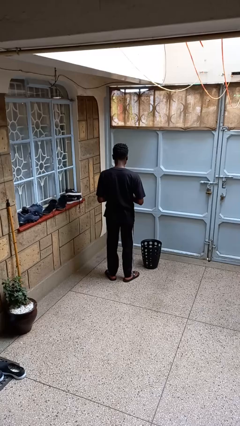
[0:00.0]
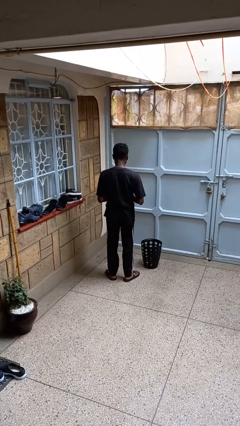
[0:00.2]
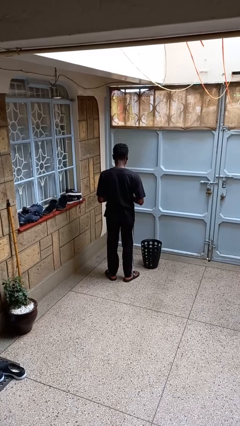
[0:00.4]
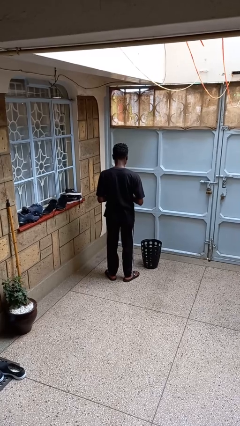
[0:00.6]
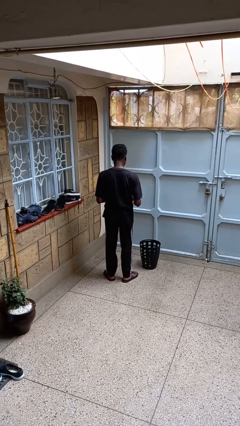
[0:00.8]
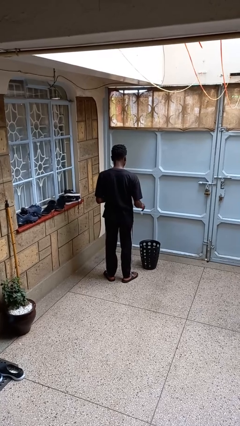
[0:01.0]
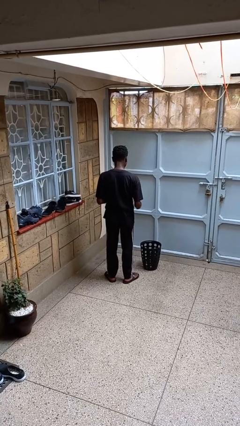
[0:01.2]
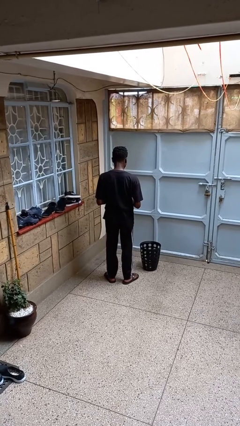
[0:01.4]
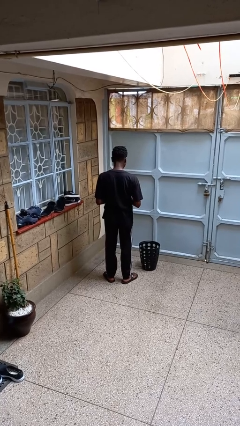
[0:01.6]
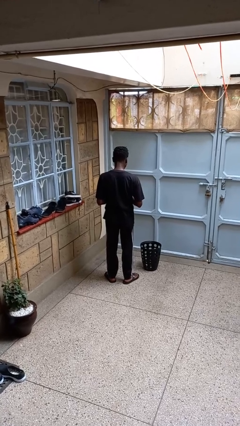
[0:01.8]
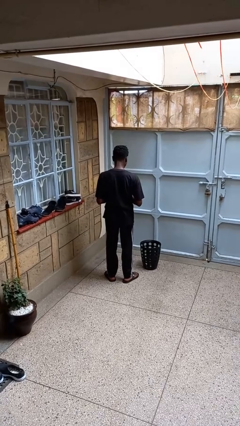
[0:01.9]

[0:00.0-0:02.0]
person discards trash

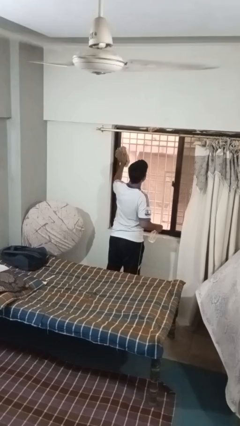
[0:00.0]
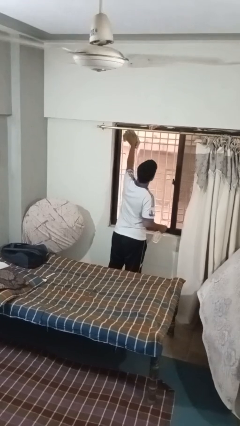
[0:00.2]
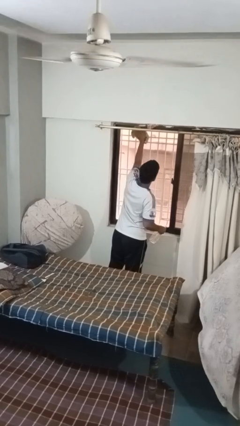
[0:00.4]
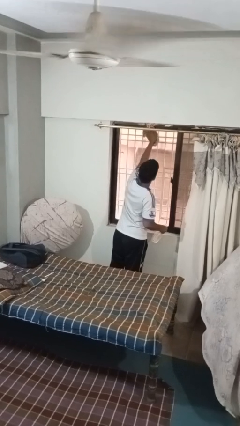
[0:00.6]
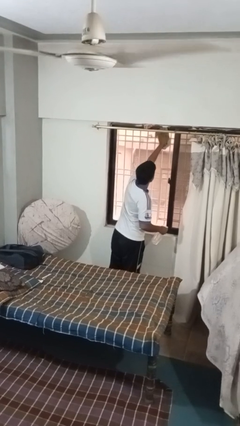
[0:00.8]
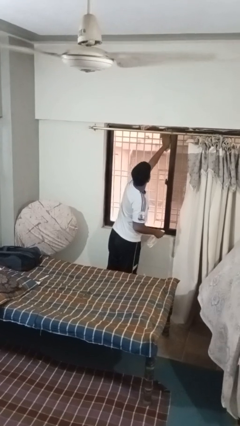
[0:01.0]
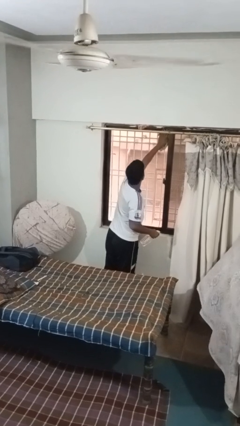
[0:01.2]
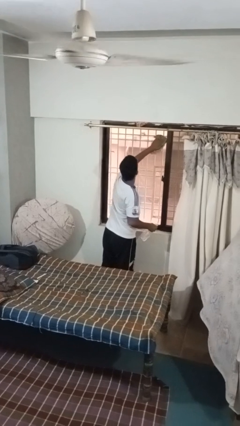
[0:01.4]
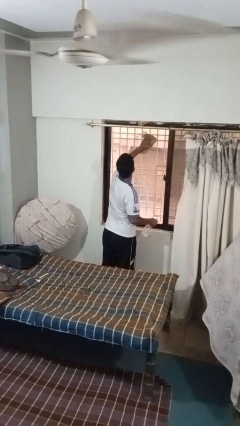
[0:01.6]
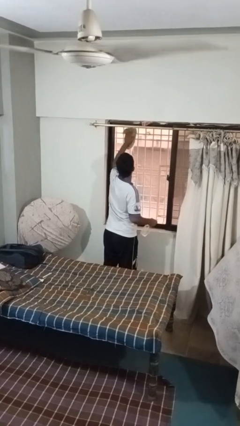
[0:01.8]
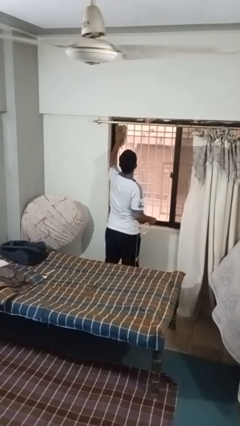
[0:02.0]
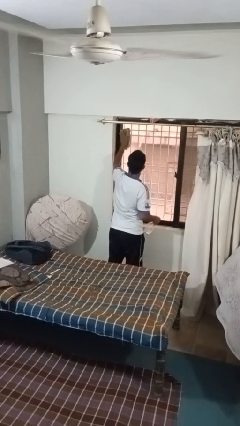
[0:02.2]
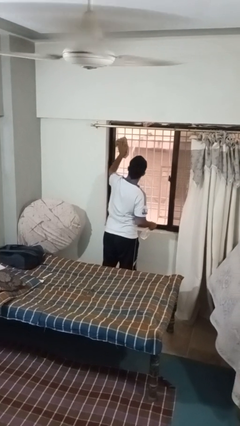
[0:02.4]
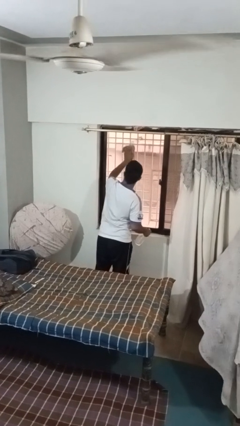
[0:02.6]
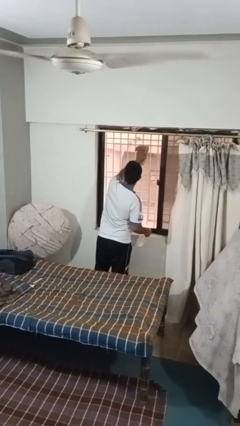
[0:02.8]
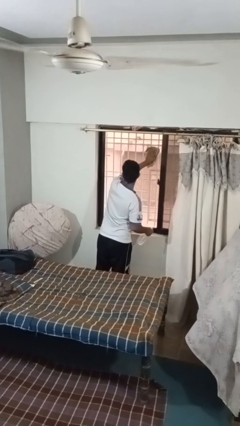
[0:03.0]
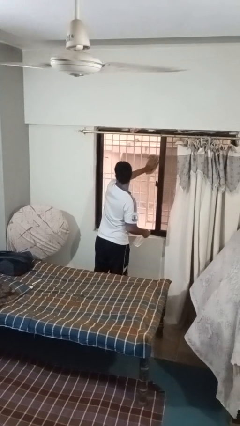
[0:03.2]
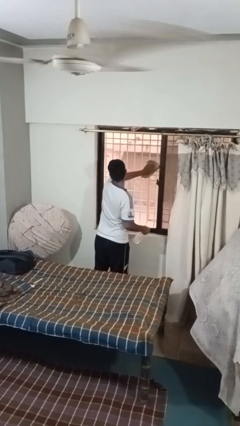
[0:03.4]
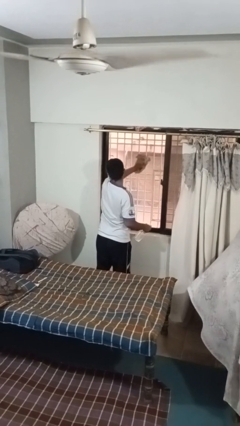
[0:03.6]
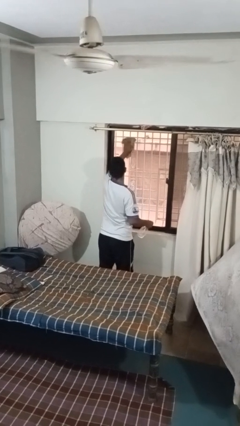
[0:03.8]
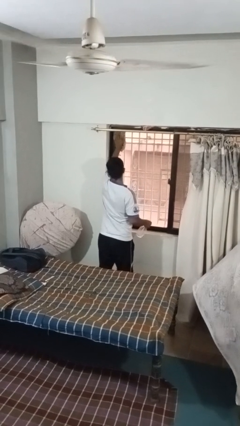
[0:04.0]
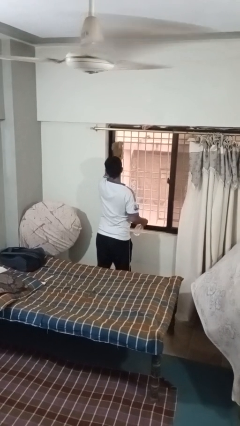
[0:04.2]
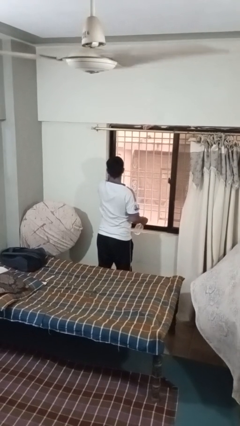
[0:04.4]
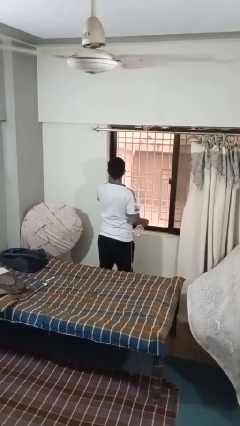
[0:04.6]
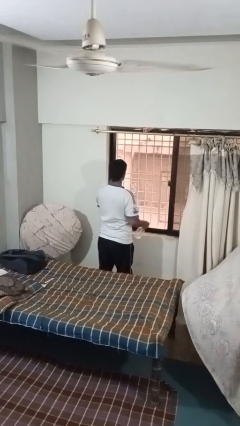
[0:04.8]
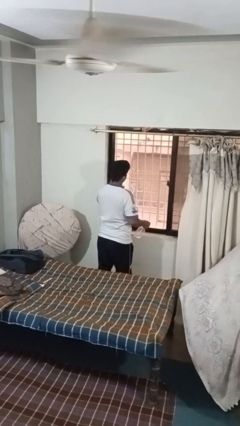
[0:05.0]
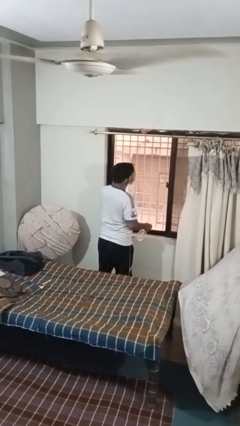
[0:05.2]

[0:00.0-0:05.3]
person washes window

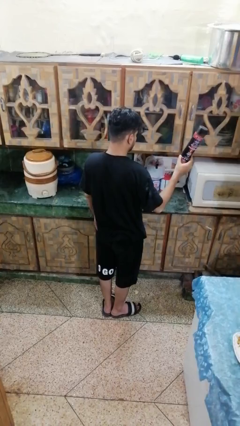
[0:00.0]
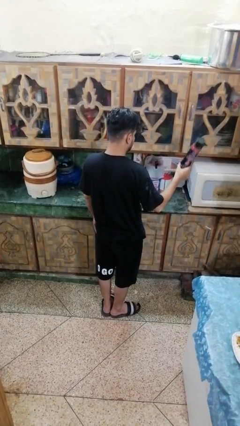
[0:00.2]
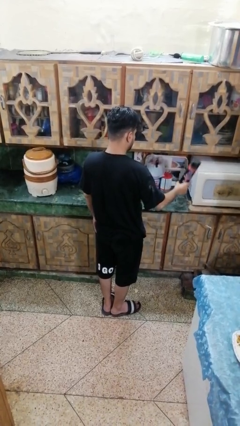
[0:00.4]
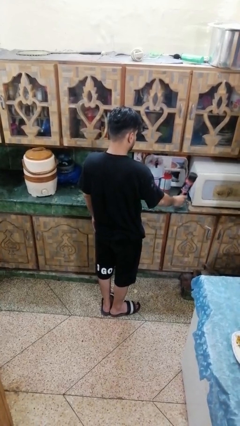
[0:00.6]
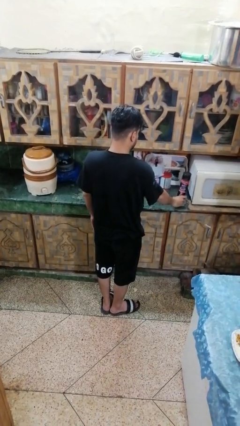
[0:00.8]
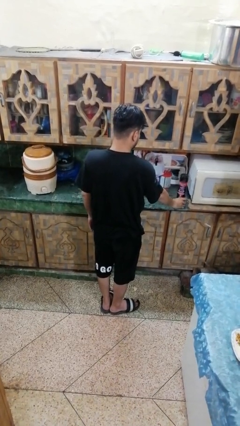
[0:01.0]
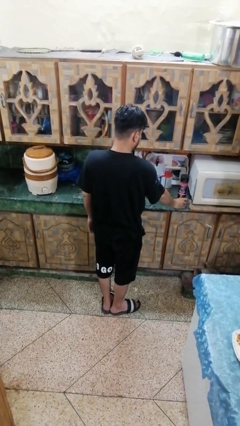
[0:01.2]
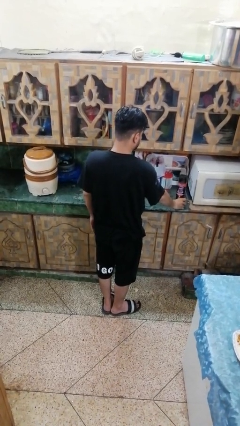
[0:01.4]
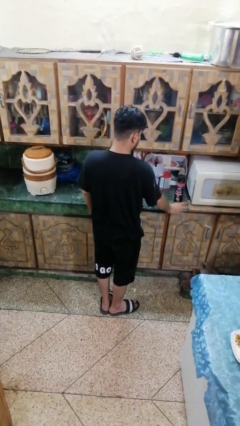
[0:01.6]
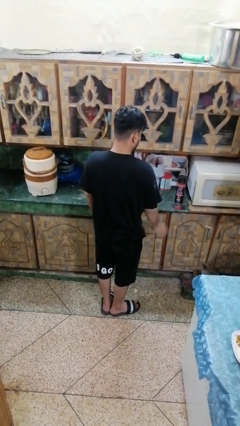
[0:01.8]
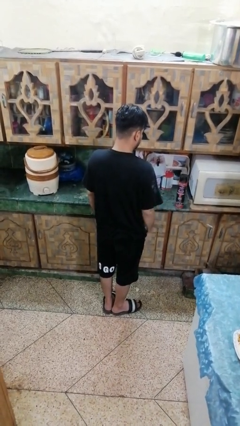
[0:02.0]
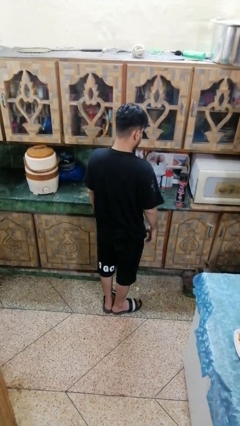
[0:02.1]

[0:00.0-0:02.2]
person puts down object on countertop

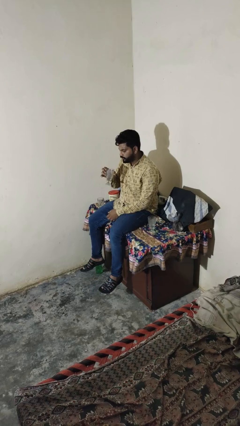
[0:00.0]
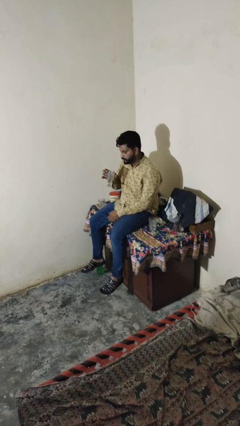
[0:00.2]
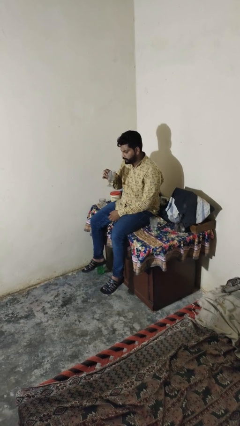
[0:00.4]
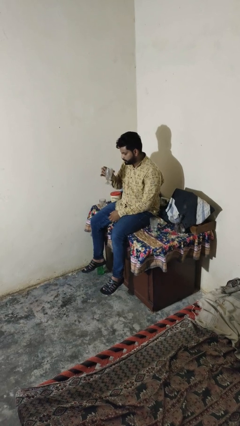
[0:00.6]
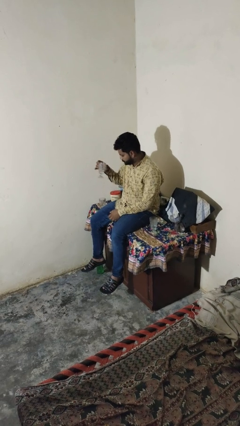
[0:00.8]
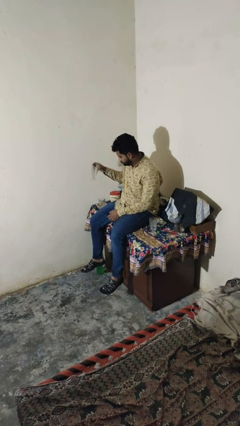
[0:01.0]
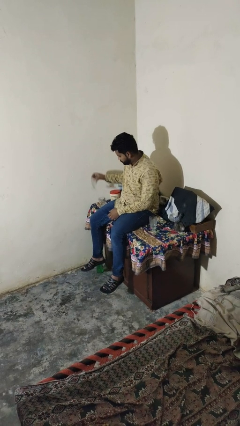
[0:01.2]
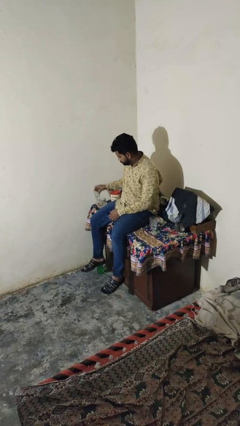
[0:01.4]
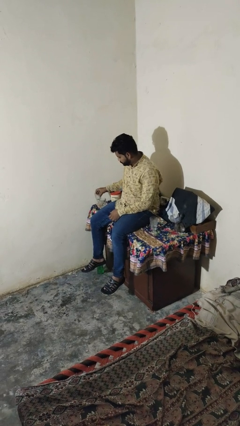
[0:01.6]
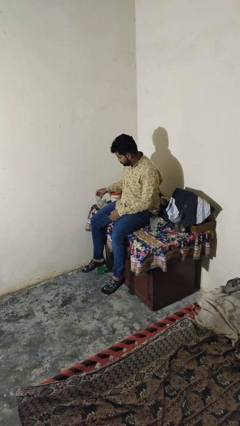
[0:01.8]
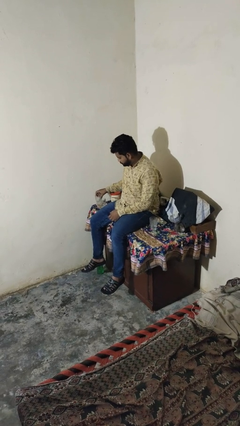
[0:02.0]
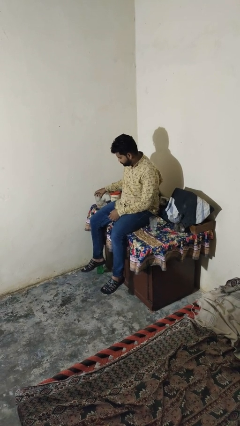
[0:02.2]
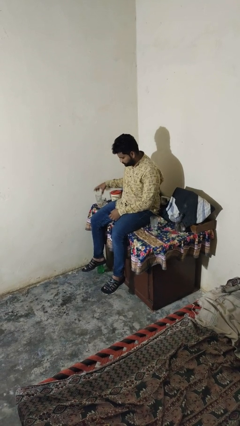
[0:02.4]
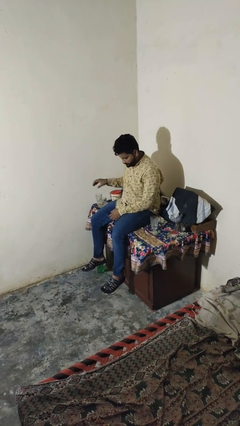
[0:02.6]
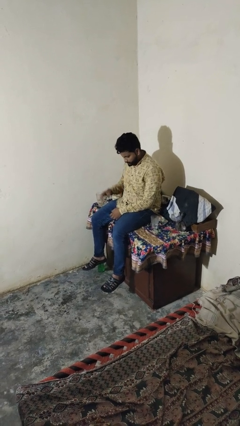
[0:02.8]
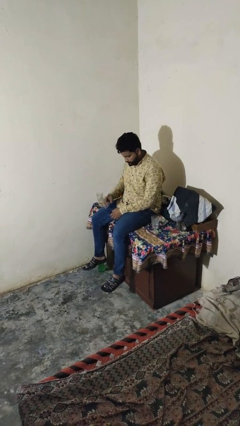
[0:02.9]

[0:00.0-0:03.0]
person puts down object on table

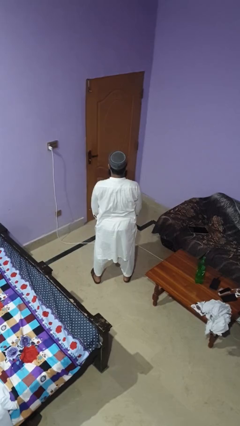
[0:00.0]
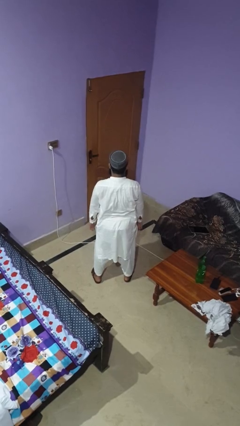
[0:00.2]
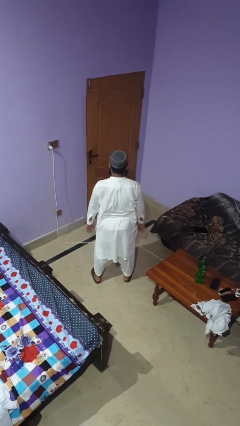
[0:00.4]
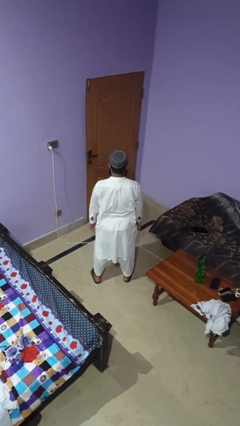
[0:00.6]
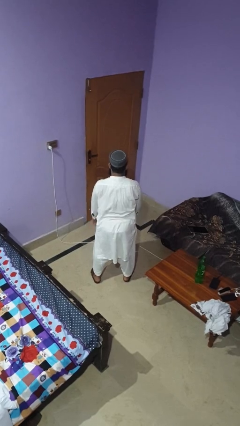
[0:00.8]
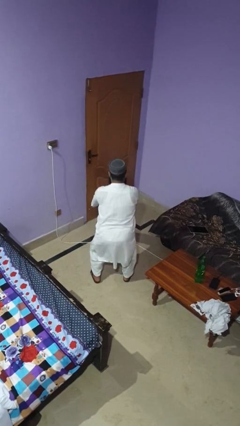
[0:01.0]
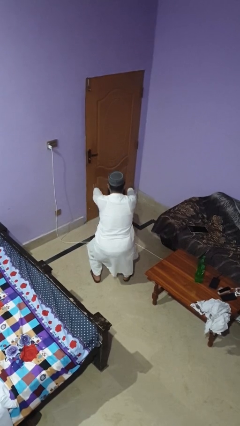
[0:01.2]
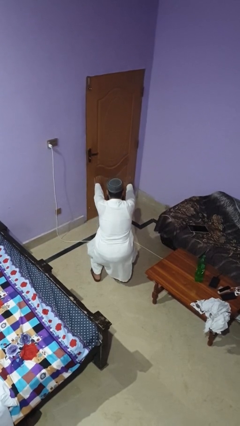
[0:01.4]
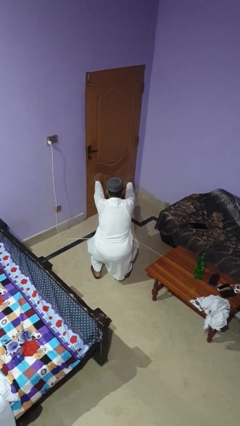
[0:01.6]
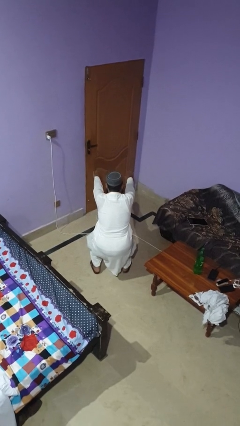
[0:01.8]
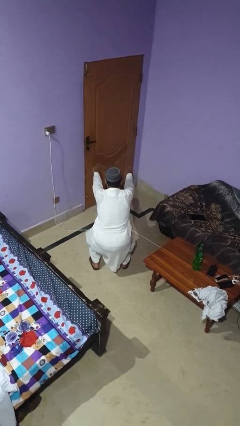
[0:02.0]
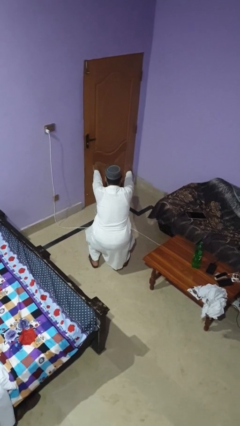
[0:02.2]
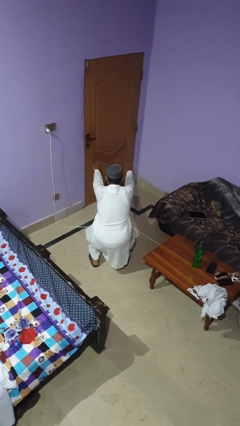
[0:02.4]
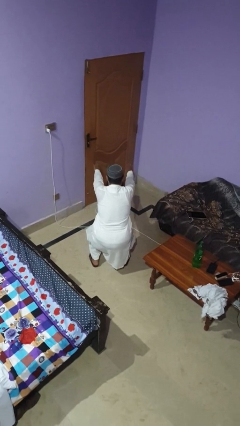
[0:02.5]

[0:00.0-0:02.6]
person squats

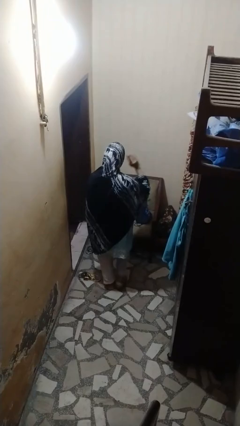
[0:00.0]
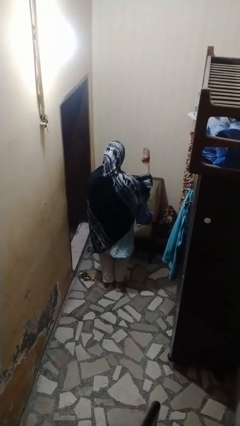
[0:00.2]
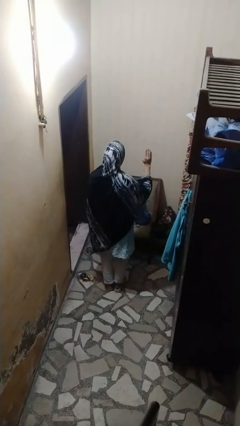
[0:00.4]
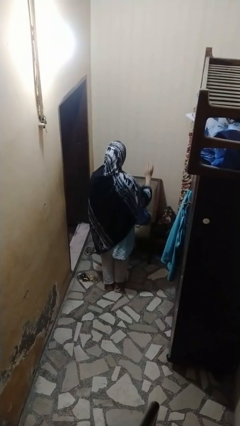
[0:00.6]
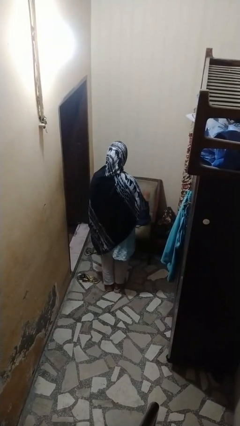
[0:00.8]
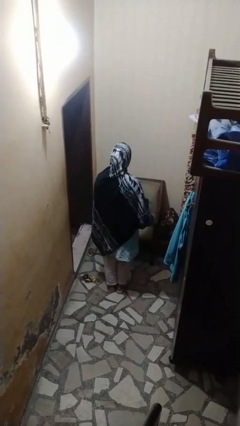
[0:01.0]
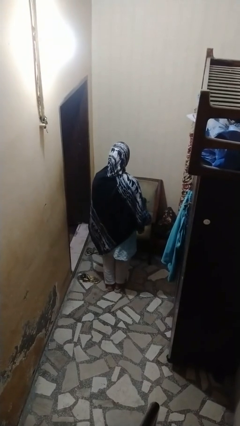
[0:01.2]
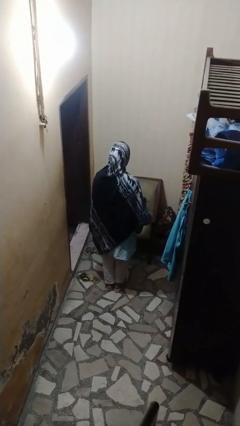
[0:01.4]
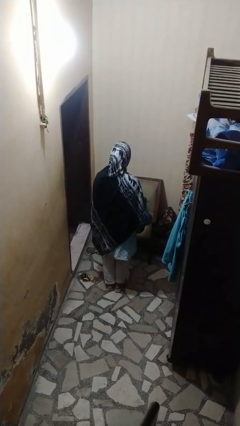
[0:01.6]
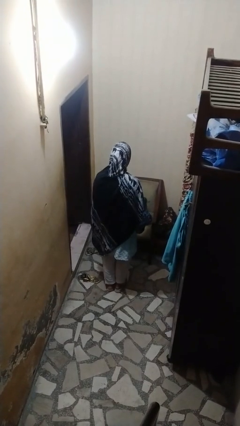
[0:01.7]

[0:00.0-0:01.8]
person salutes

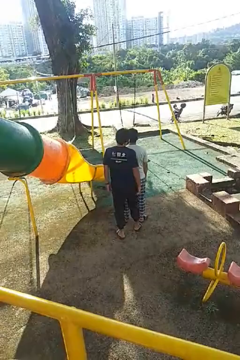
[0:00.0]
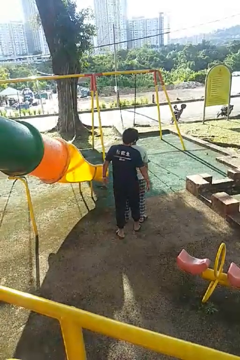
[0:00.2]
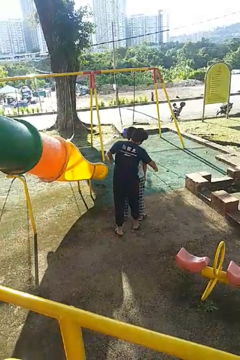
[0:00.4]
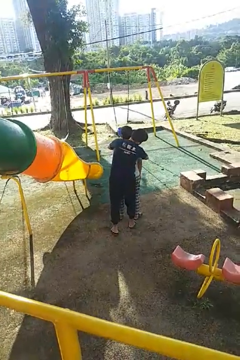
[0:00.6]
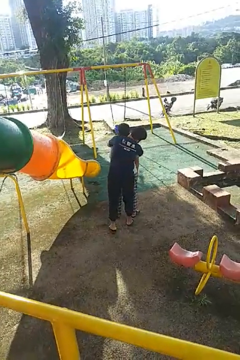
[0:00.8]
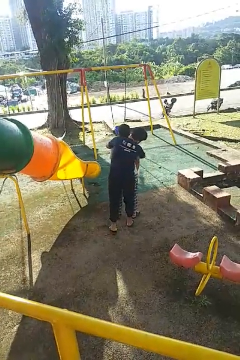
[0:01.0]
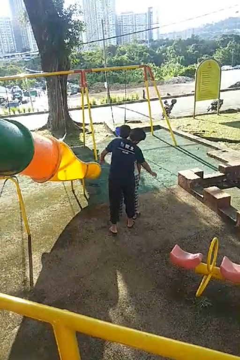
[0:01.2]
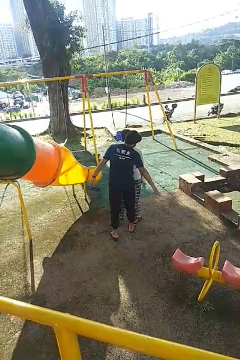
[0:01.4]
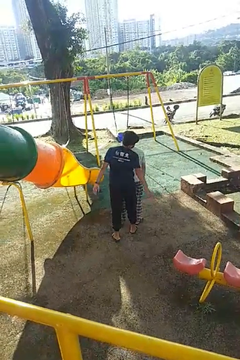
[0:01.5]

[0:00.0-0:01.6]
person hugs person from behind
